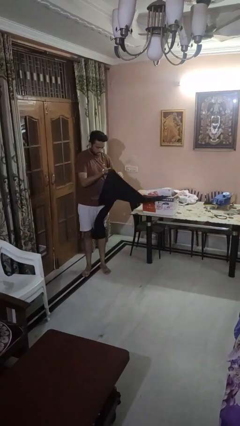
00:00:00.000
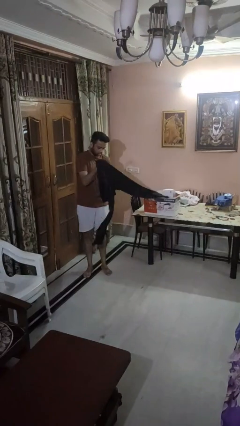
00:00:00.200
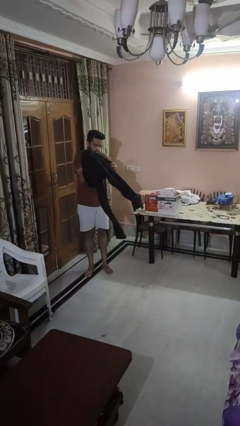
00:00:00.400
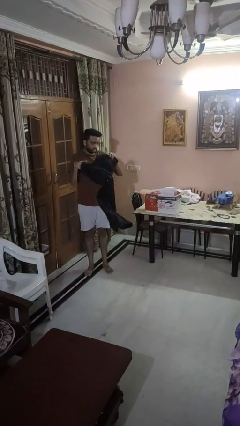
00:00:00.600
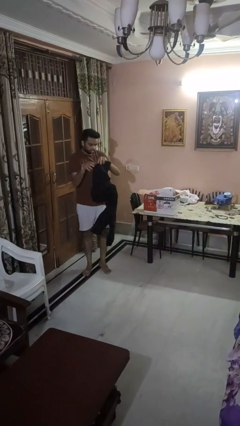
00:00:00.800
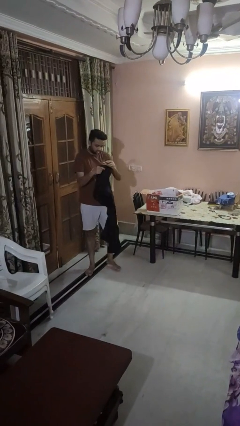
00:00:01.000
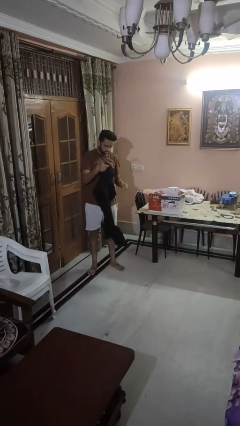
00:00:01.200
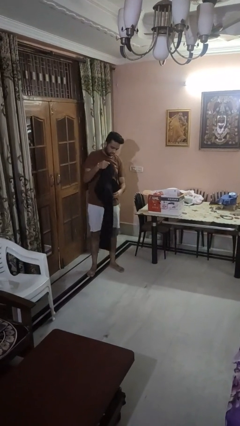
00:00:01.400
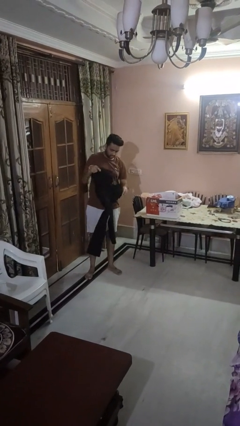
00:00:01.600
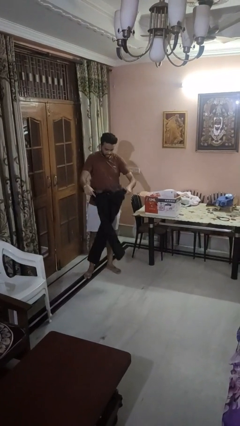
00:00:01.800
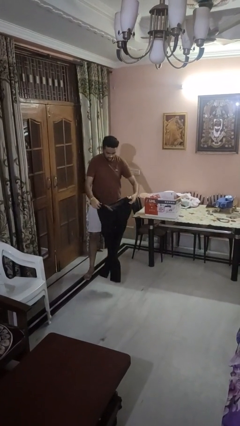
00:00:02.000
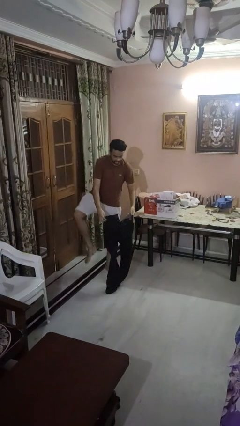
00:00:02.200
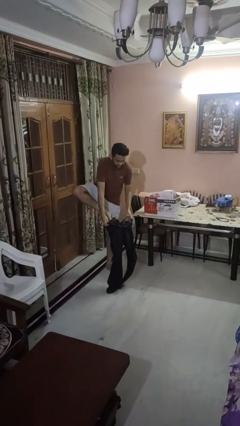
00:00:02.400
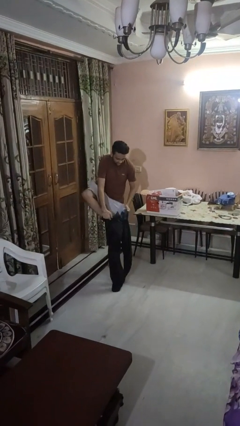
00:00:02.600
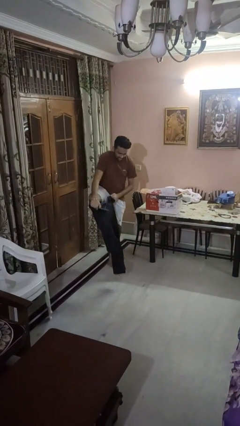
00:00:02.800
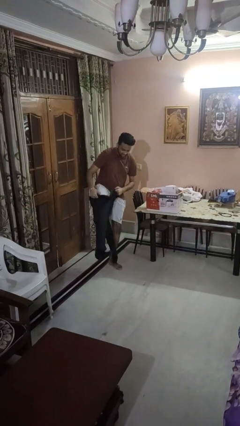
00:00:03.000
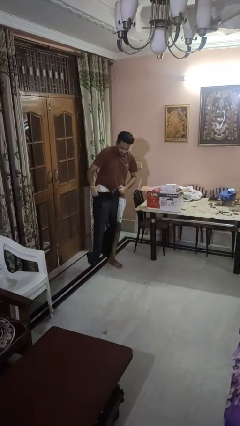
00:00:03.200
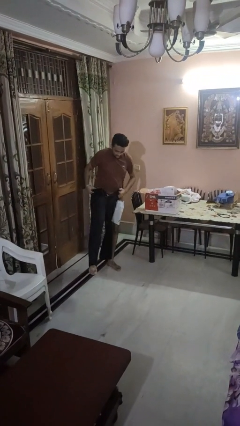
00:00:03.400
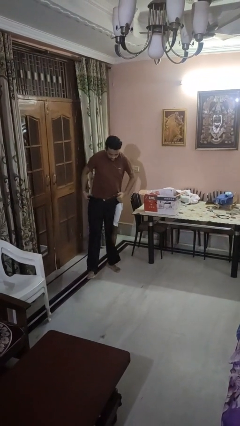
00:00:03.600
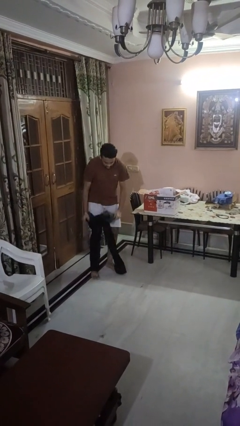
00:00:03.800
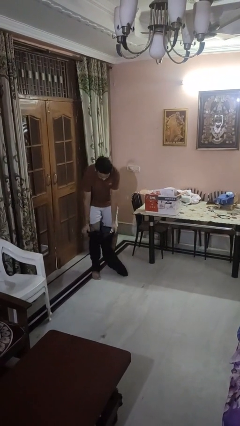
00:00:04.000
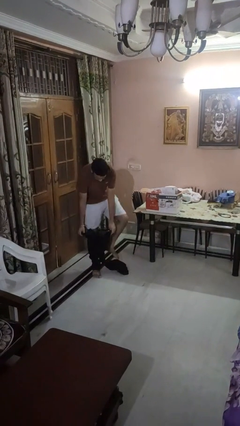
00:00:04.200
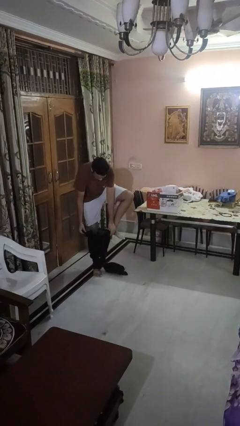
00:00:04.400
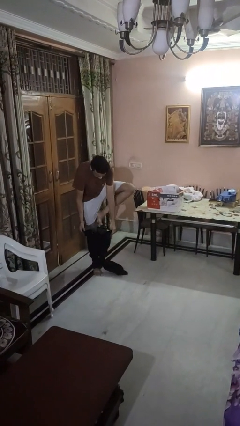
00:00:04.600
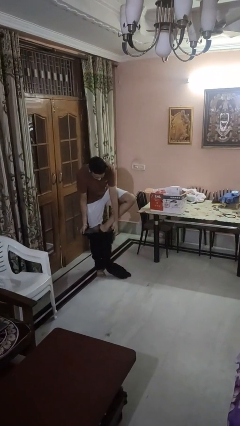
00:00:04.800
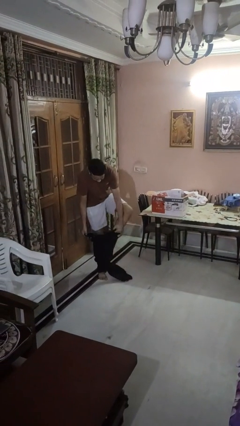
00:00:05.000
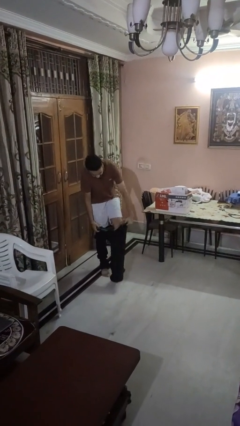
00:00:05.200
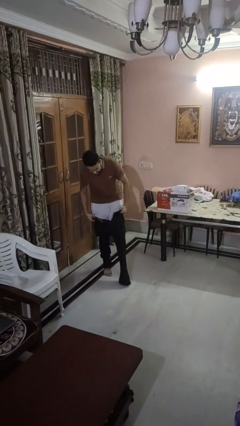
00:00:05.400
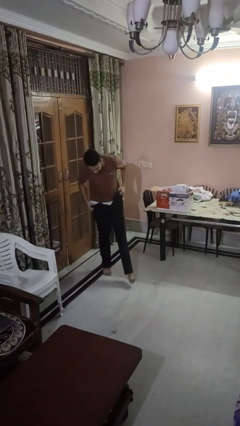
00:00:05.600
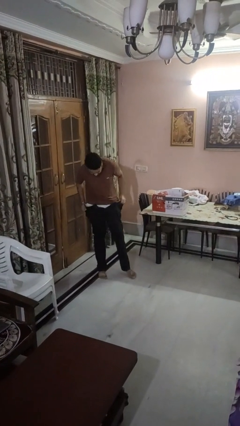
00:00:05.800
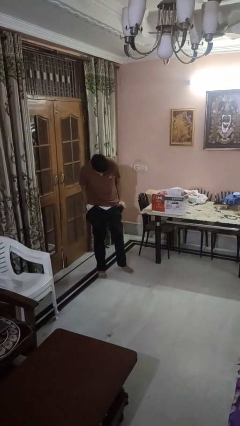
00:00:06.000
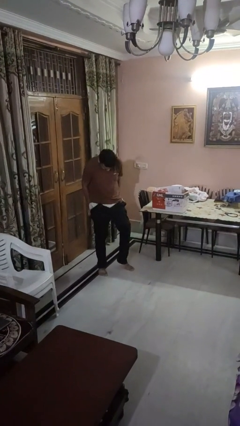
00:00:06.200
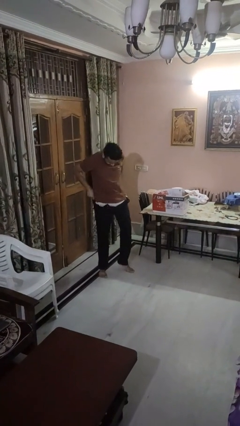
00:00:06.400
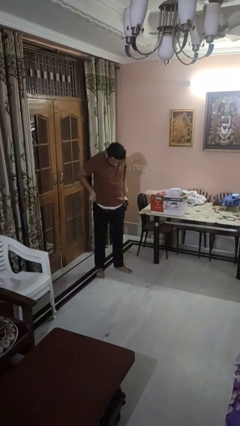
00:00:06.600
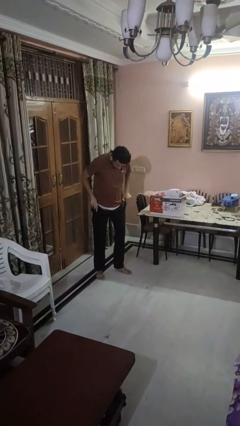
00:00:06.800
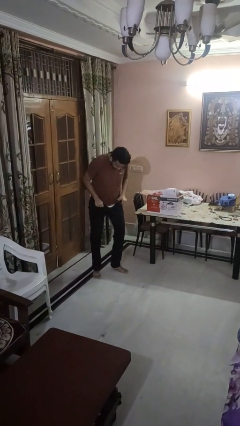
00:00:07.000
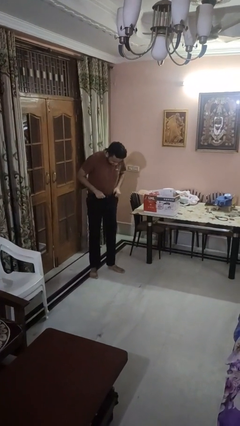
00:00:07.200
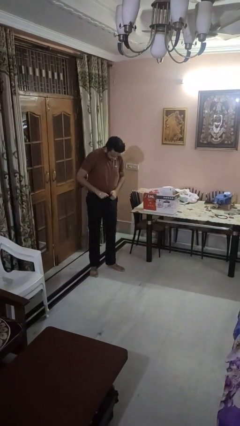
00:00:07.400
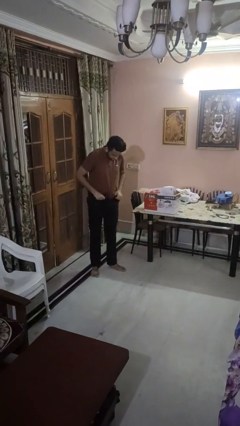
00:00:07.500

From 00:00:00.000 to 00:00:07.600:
person puts on pants

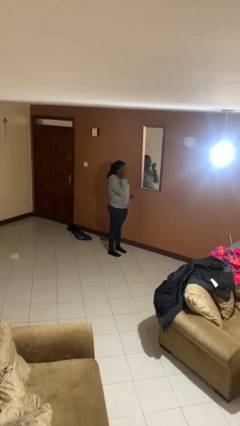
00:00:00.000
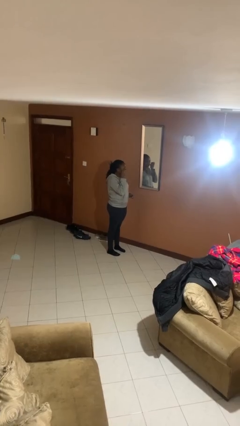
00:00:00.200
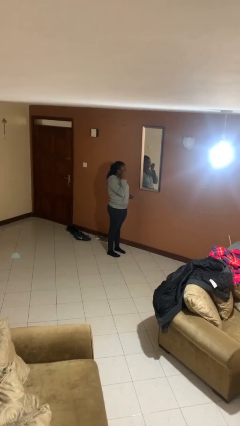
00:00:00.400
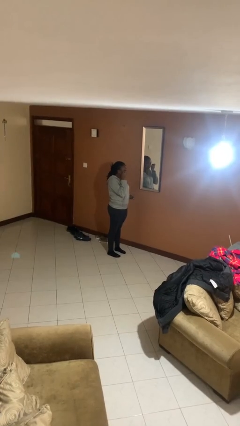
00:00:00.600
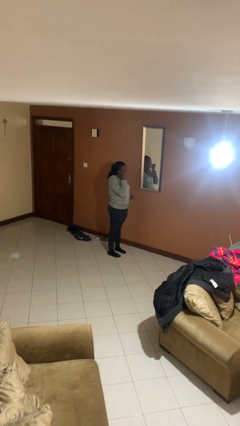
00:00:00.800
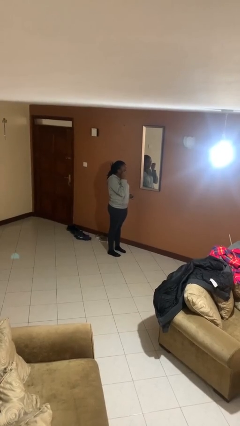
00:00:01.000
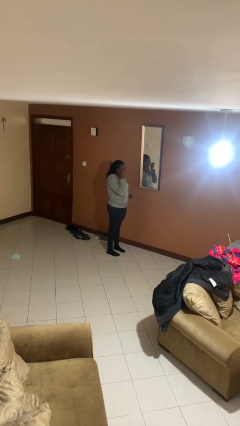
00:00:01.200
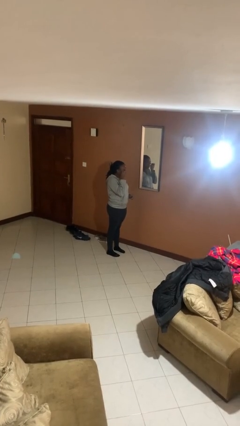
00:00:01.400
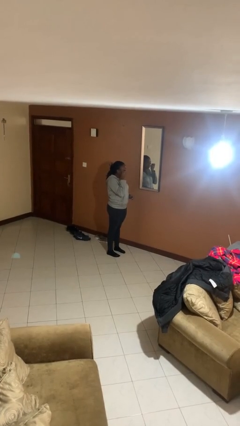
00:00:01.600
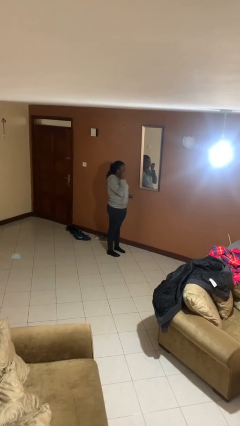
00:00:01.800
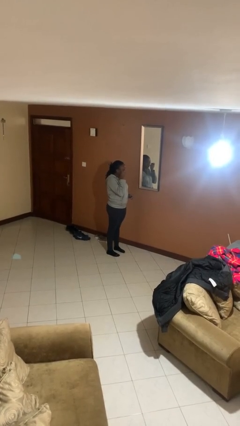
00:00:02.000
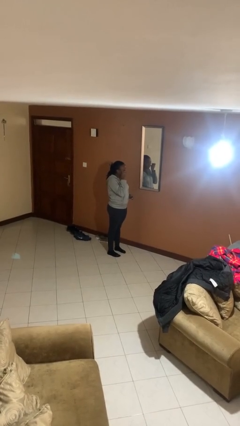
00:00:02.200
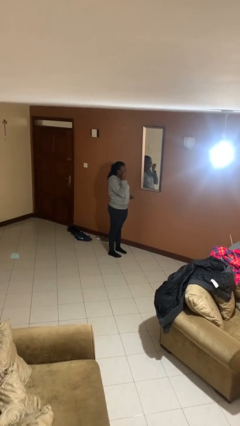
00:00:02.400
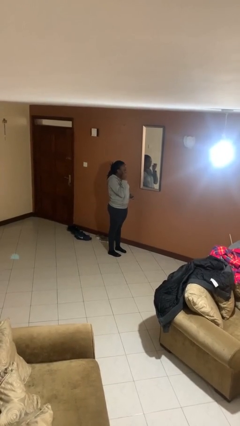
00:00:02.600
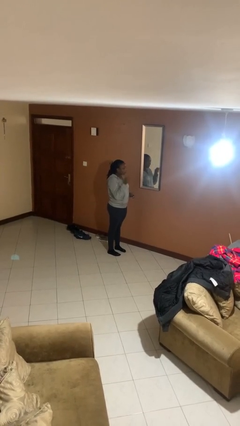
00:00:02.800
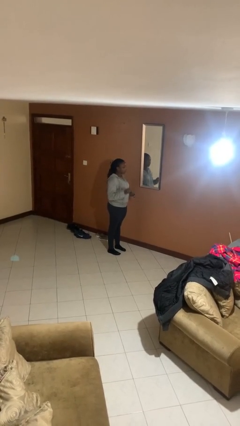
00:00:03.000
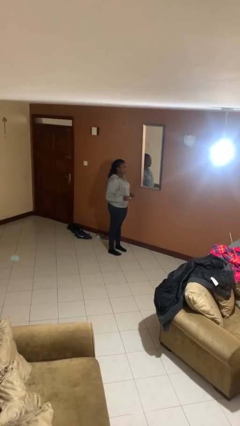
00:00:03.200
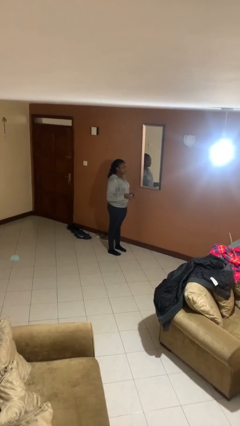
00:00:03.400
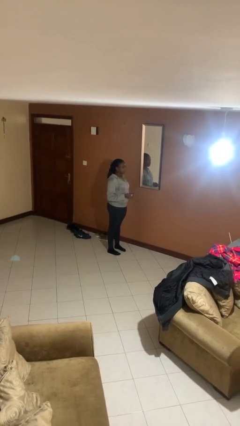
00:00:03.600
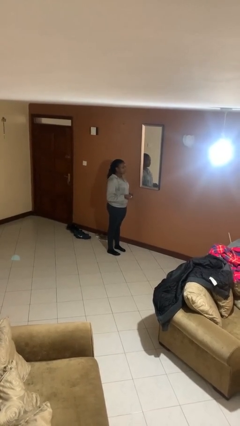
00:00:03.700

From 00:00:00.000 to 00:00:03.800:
person applies eye makeup

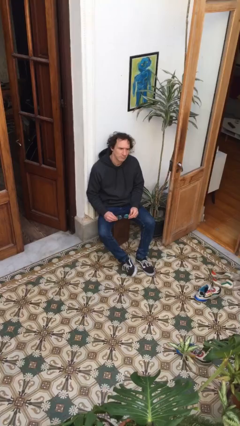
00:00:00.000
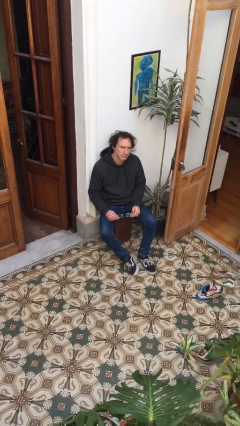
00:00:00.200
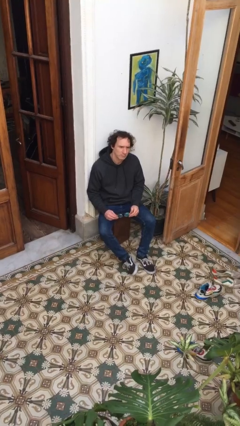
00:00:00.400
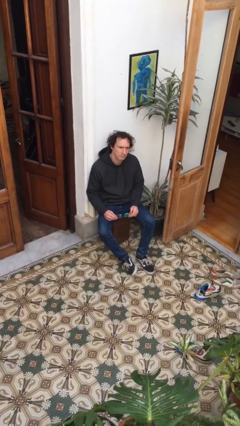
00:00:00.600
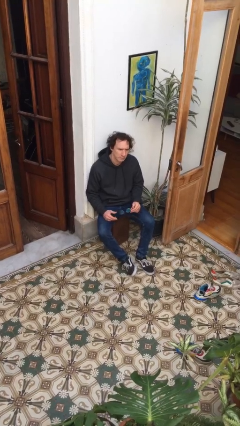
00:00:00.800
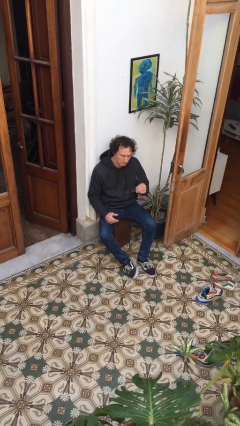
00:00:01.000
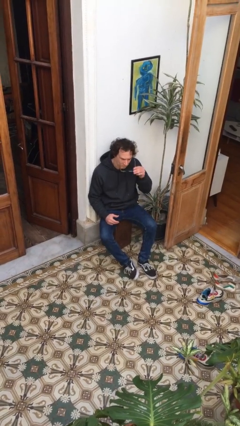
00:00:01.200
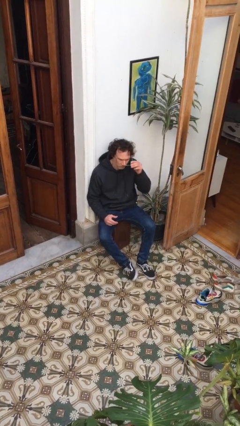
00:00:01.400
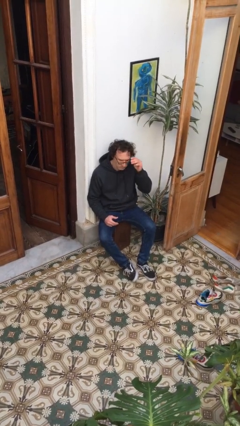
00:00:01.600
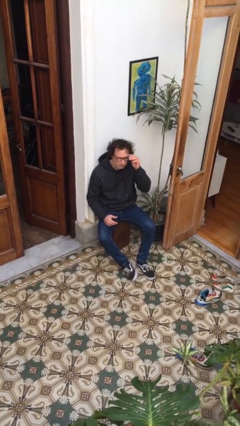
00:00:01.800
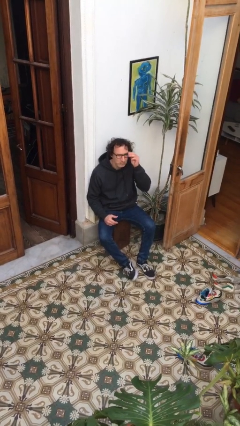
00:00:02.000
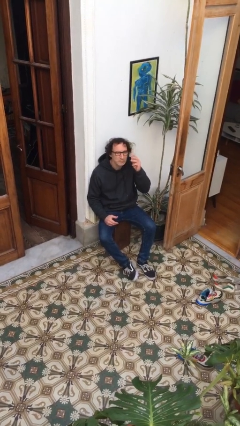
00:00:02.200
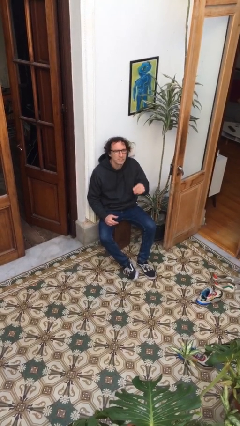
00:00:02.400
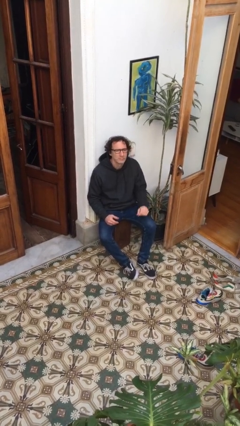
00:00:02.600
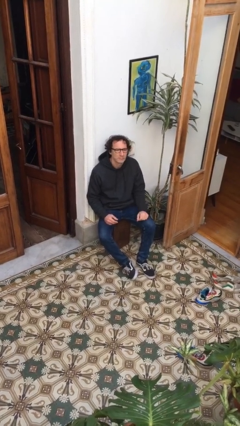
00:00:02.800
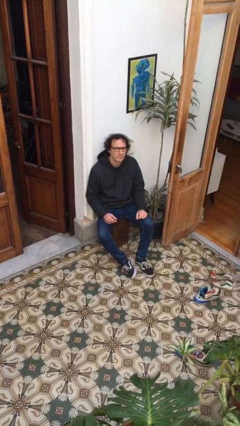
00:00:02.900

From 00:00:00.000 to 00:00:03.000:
person puts on glasses

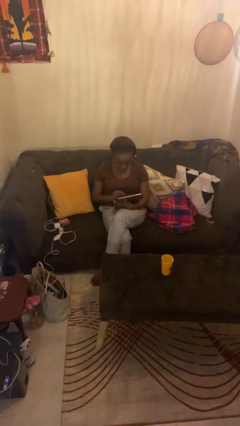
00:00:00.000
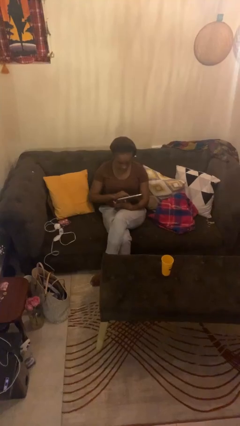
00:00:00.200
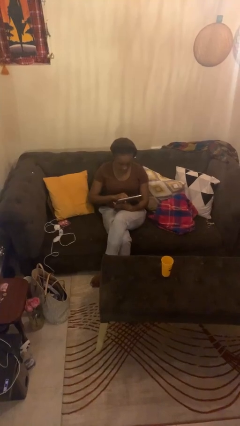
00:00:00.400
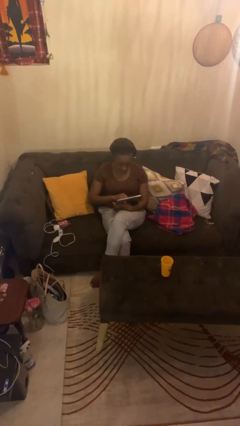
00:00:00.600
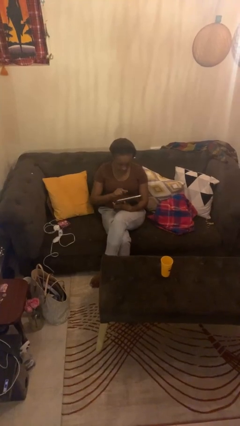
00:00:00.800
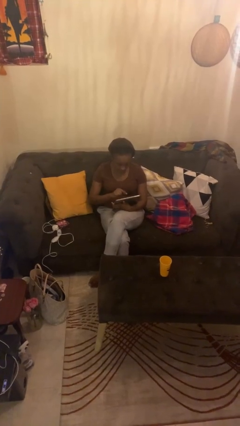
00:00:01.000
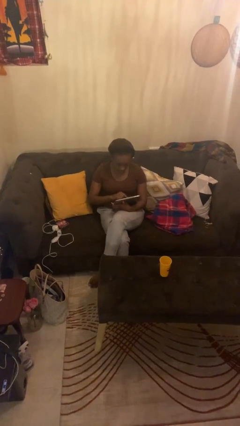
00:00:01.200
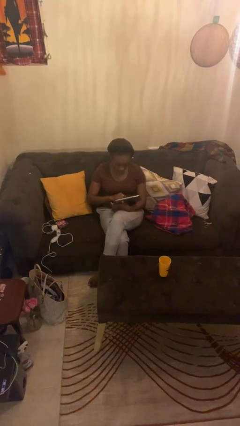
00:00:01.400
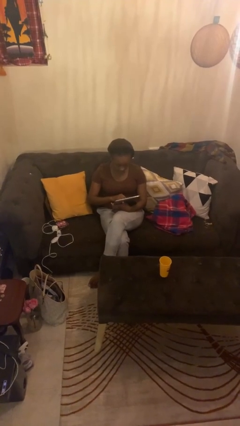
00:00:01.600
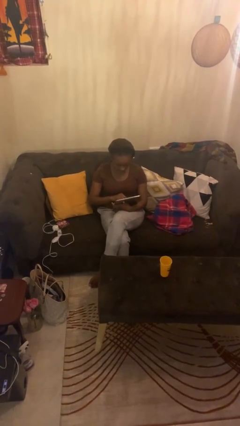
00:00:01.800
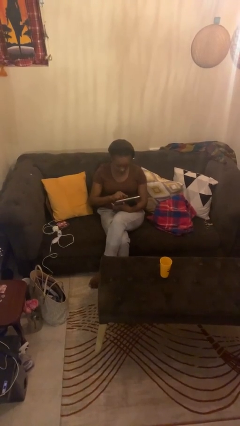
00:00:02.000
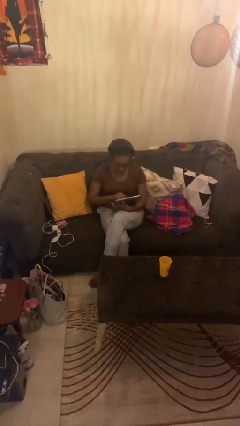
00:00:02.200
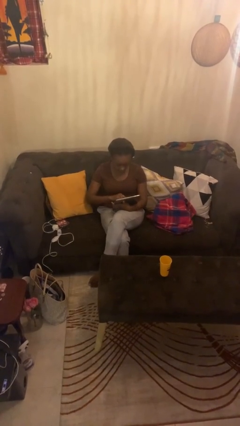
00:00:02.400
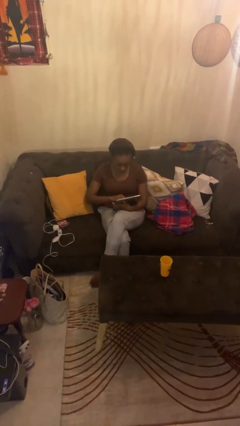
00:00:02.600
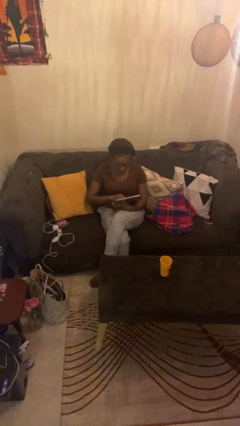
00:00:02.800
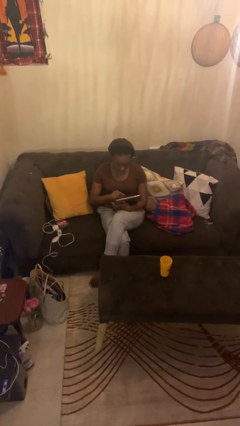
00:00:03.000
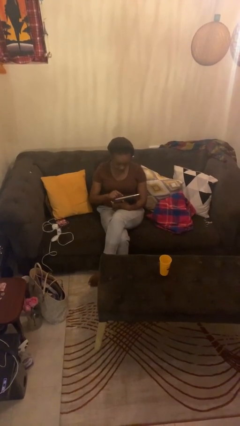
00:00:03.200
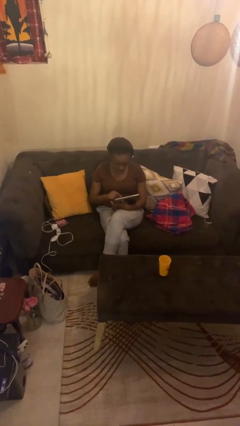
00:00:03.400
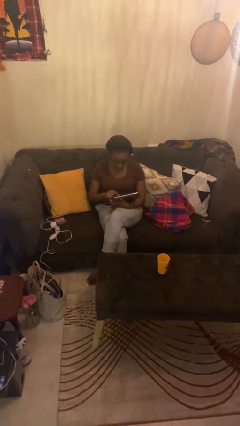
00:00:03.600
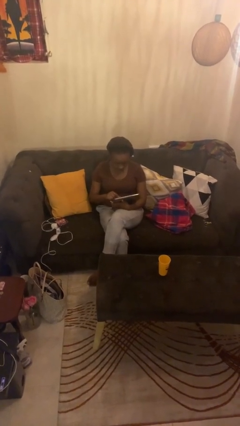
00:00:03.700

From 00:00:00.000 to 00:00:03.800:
person interacts with tablet
